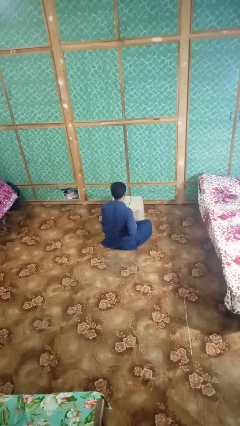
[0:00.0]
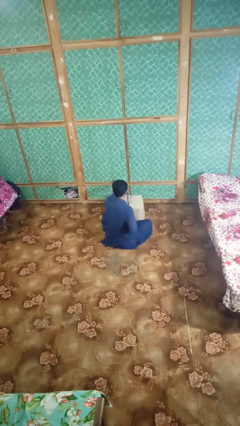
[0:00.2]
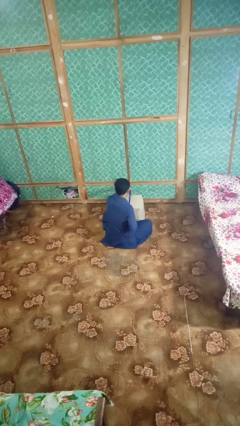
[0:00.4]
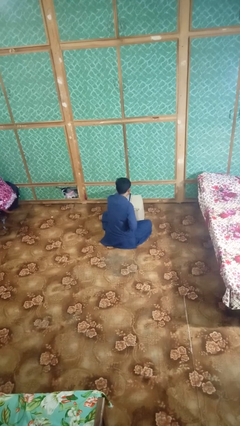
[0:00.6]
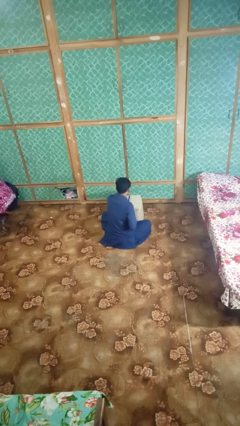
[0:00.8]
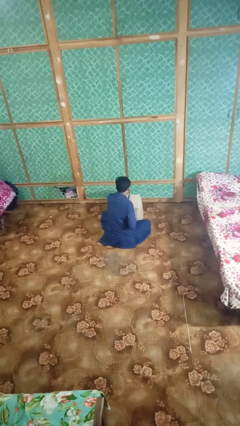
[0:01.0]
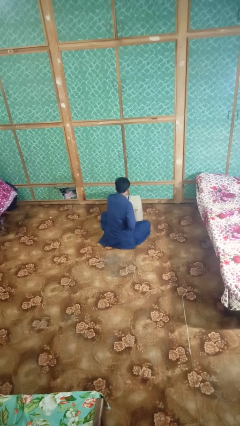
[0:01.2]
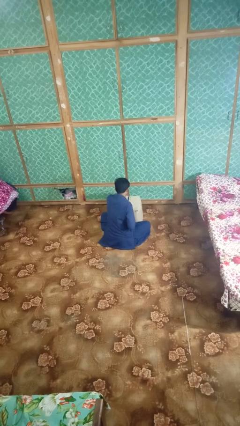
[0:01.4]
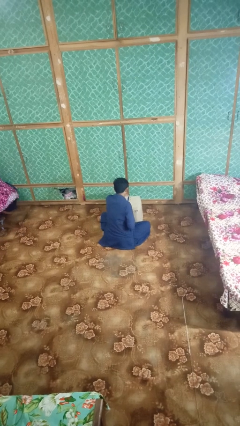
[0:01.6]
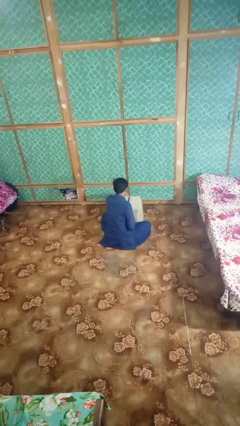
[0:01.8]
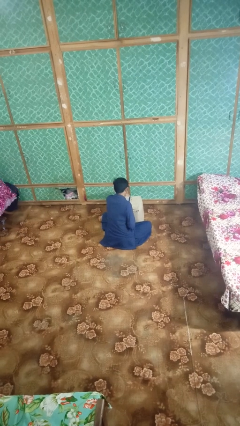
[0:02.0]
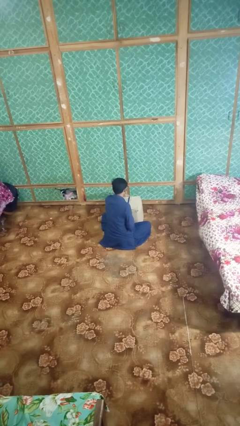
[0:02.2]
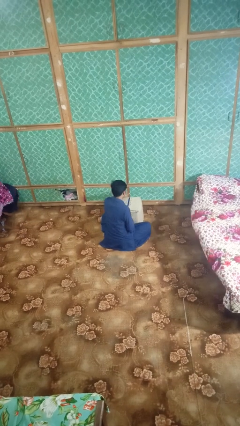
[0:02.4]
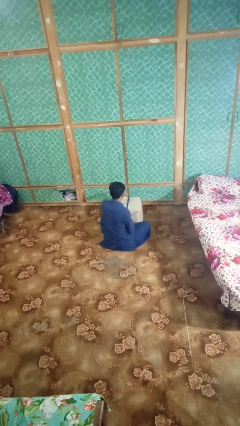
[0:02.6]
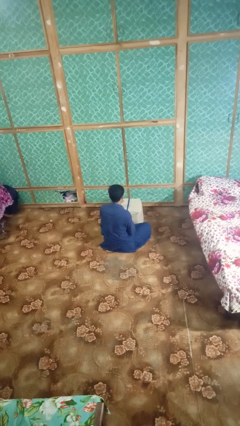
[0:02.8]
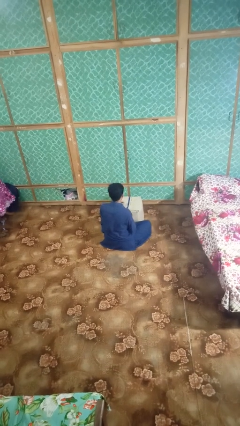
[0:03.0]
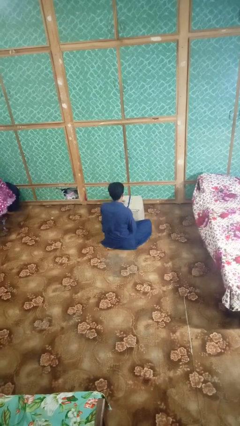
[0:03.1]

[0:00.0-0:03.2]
person wraps box

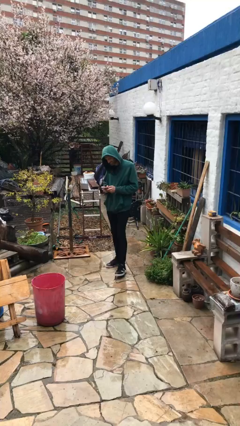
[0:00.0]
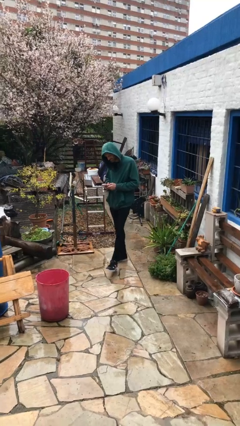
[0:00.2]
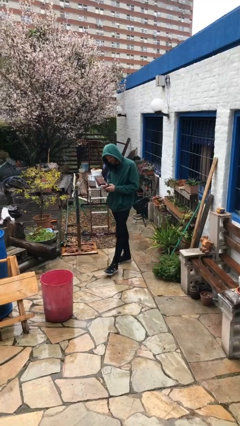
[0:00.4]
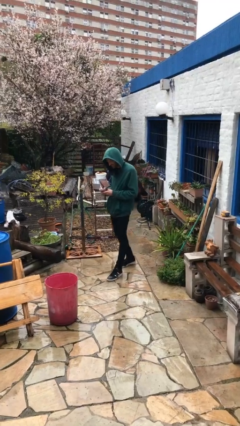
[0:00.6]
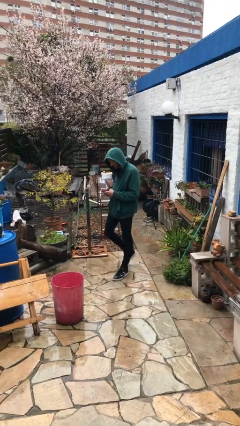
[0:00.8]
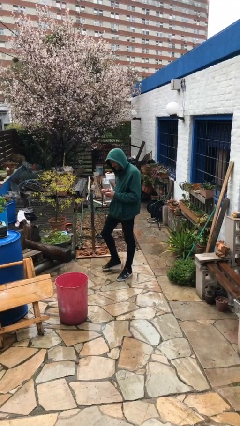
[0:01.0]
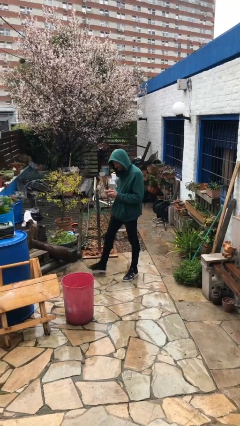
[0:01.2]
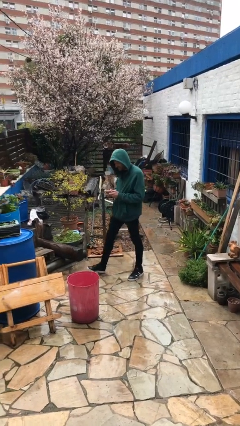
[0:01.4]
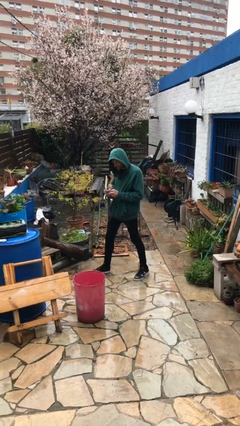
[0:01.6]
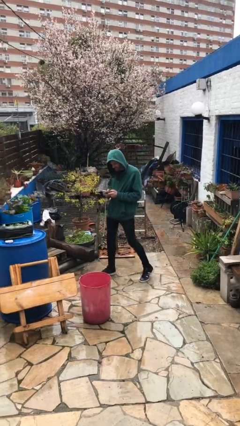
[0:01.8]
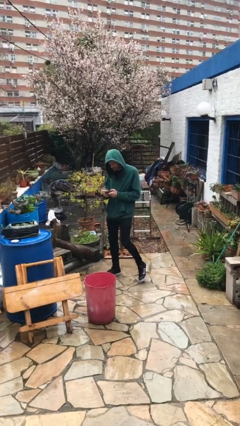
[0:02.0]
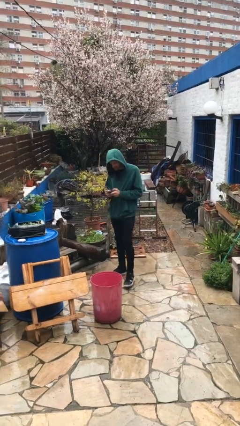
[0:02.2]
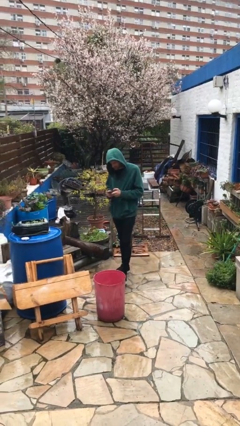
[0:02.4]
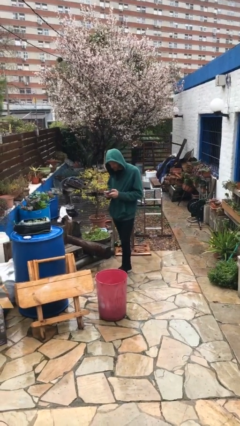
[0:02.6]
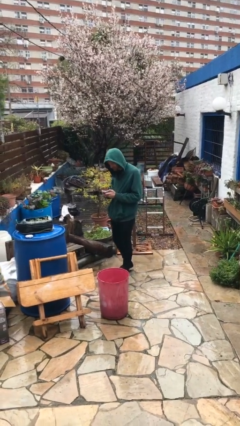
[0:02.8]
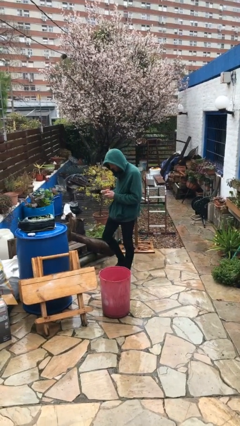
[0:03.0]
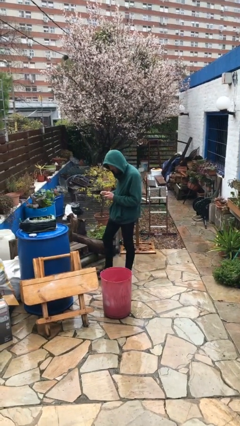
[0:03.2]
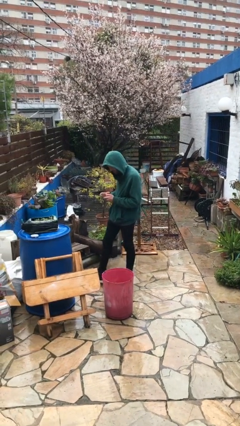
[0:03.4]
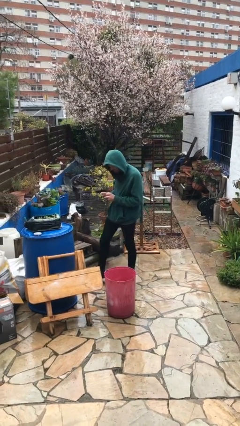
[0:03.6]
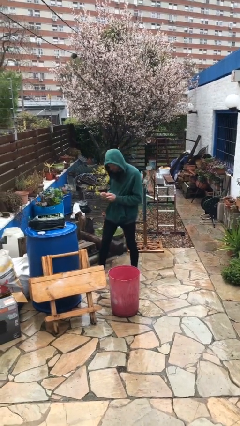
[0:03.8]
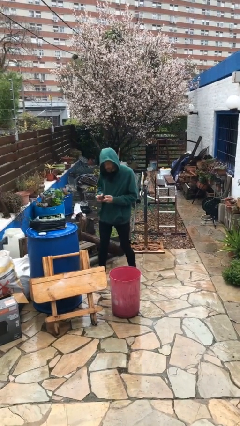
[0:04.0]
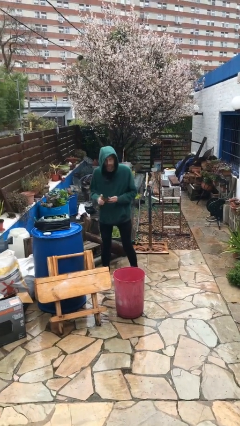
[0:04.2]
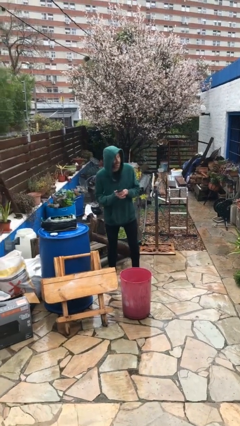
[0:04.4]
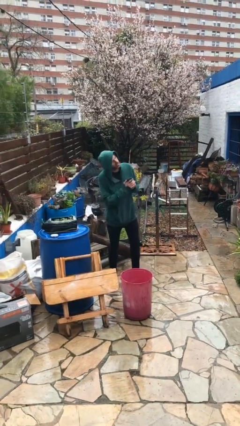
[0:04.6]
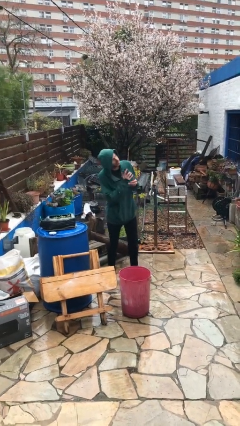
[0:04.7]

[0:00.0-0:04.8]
person texts on phone

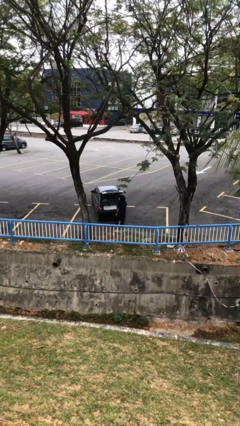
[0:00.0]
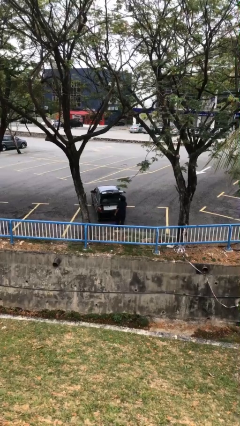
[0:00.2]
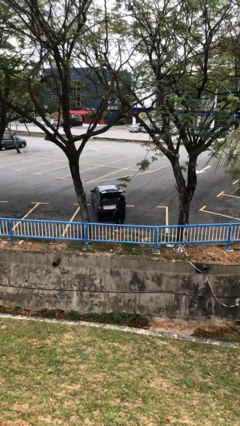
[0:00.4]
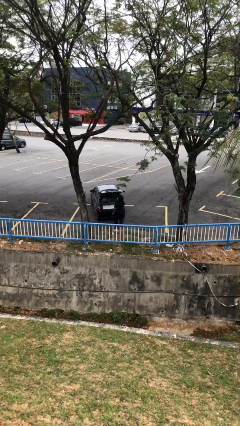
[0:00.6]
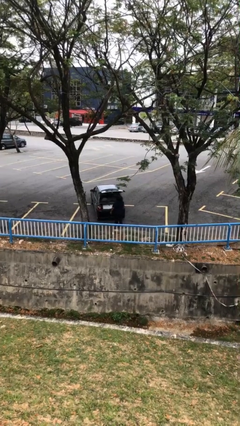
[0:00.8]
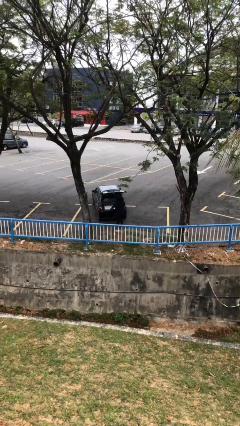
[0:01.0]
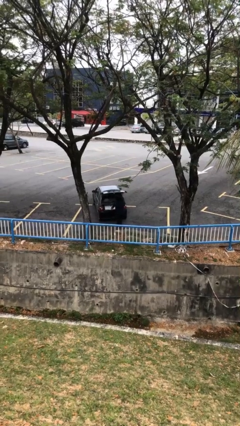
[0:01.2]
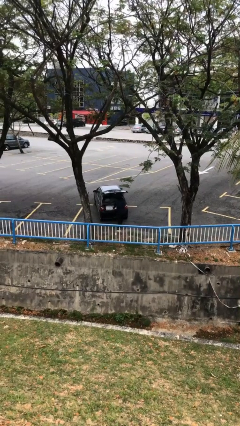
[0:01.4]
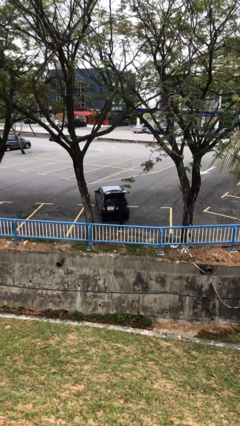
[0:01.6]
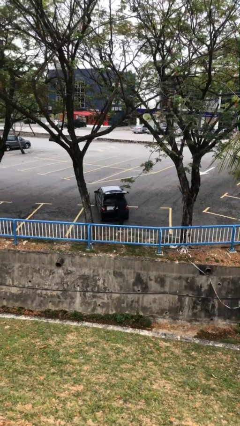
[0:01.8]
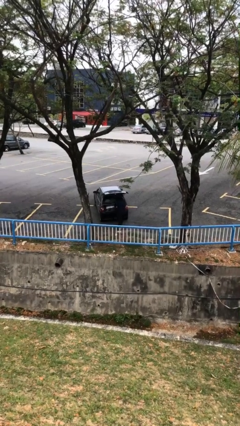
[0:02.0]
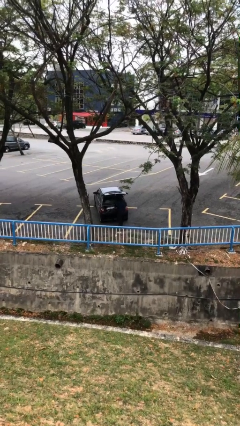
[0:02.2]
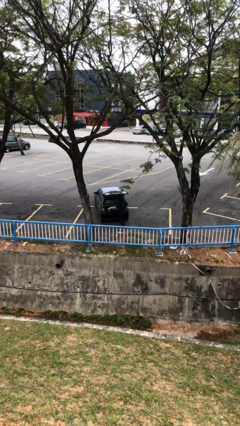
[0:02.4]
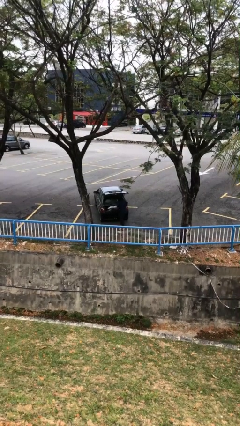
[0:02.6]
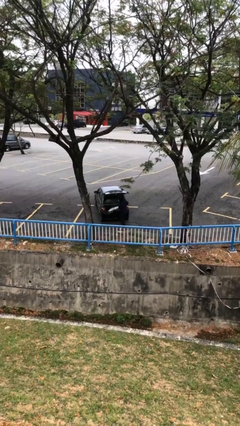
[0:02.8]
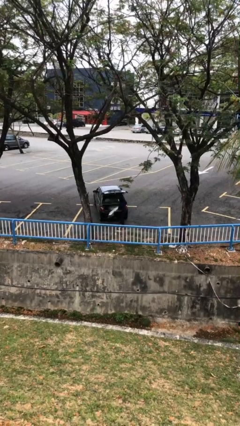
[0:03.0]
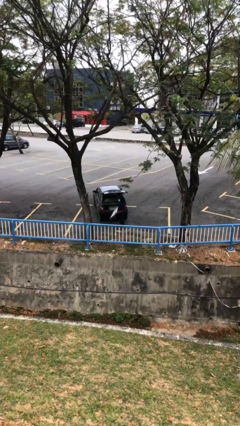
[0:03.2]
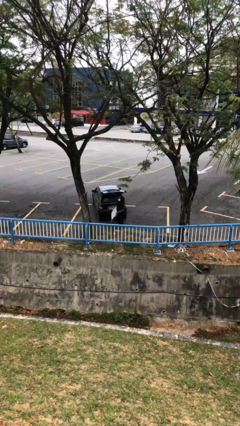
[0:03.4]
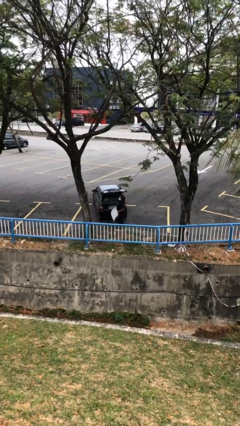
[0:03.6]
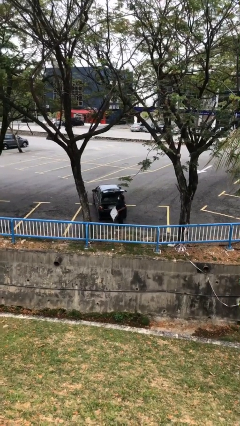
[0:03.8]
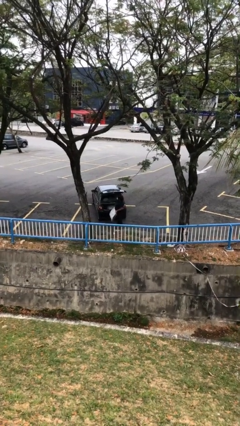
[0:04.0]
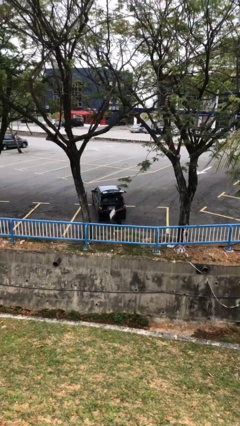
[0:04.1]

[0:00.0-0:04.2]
person unloads car

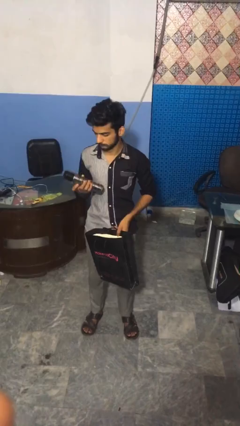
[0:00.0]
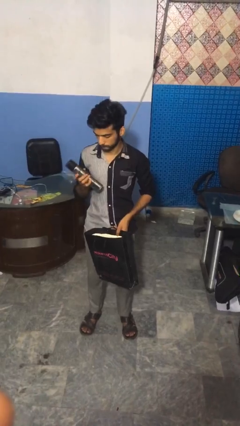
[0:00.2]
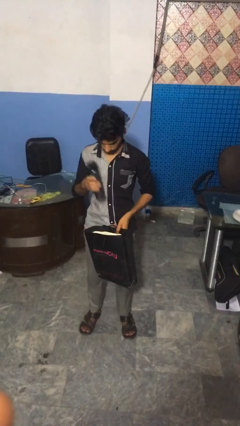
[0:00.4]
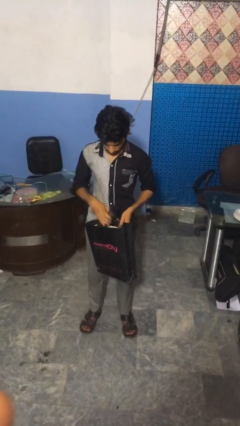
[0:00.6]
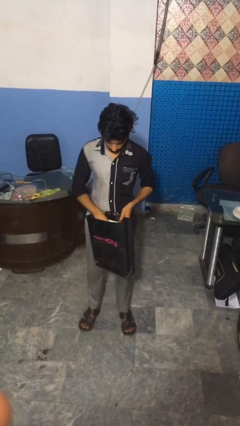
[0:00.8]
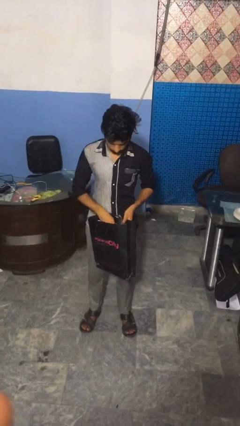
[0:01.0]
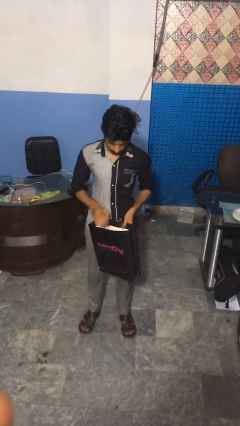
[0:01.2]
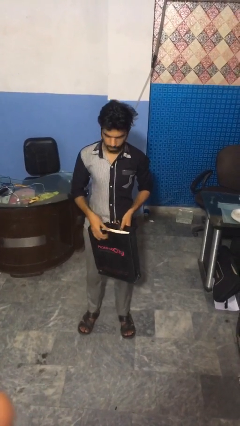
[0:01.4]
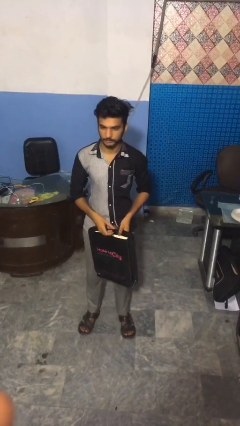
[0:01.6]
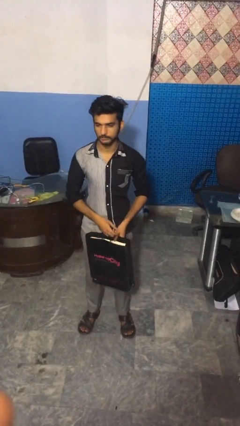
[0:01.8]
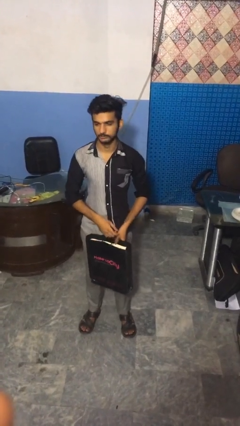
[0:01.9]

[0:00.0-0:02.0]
person puts object into bag

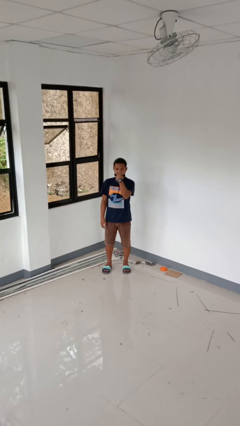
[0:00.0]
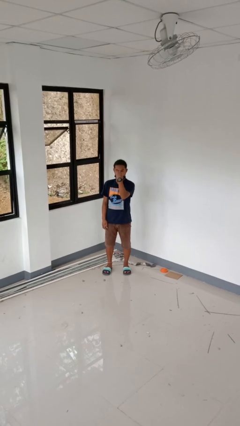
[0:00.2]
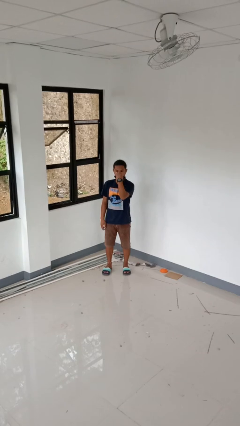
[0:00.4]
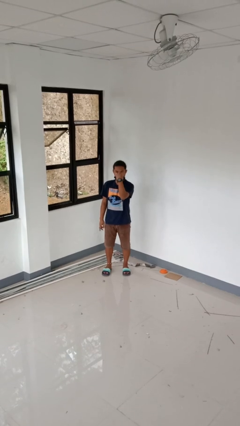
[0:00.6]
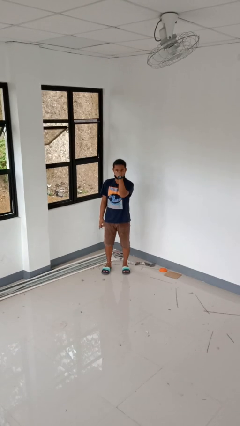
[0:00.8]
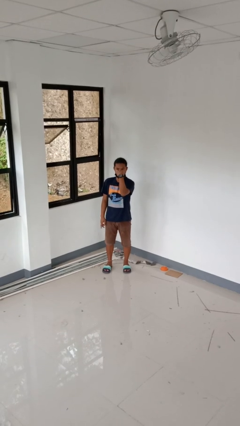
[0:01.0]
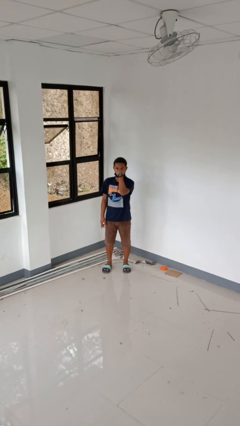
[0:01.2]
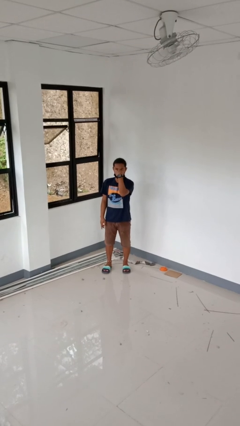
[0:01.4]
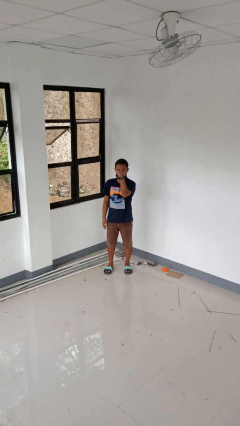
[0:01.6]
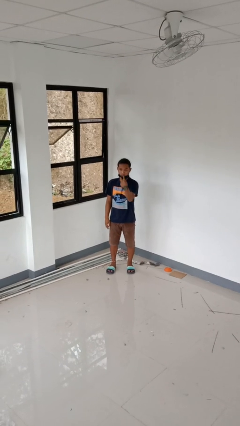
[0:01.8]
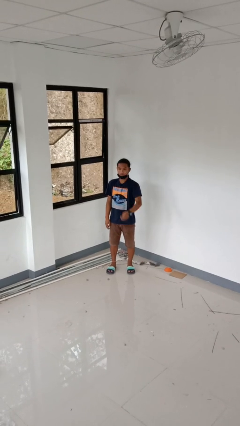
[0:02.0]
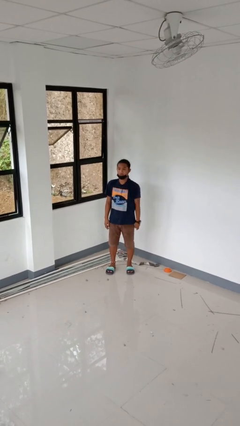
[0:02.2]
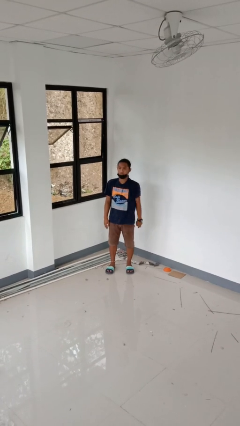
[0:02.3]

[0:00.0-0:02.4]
person gestures watch closely

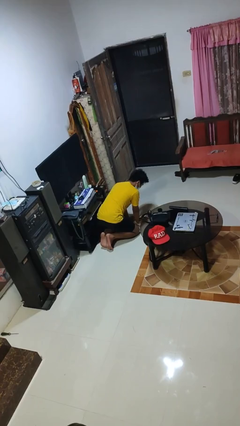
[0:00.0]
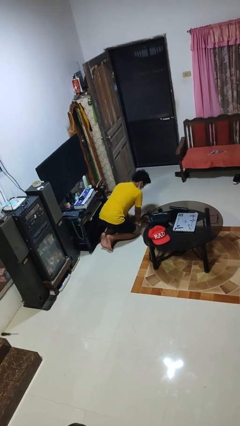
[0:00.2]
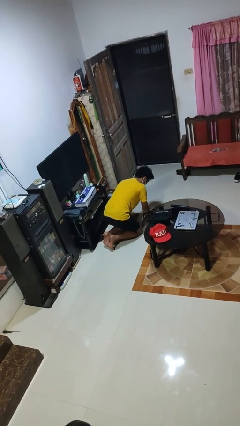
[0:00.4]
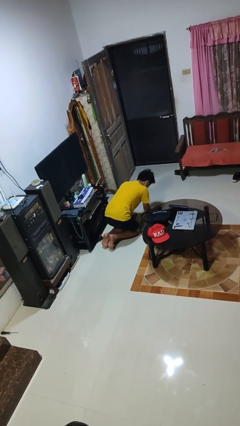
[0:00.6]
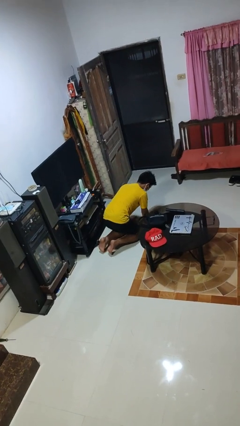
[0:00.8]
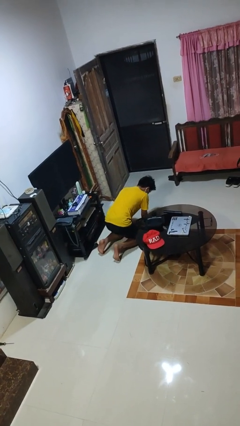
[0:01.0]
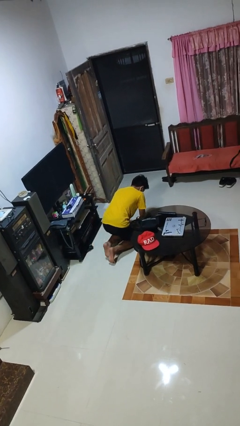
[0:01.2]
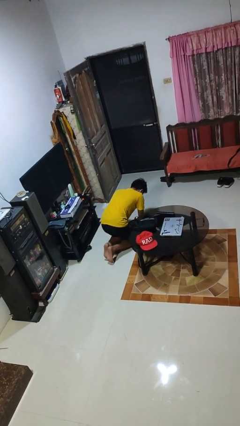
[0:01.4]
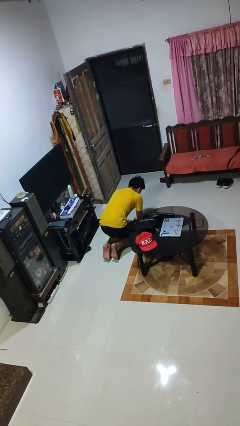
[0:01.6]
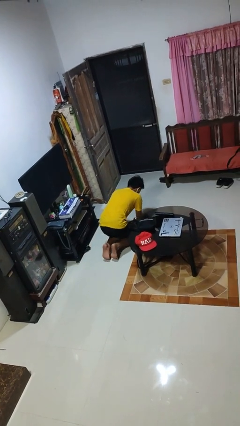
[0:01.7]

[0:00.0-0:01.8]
person crawls
